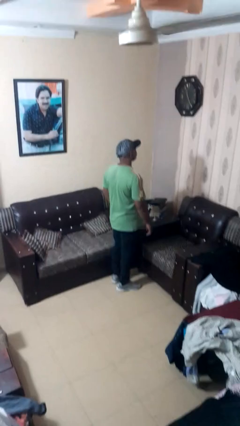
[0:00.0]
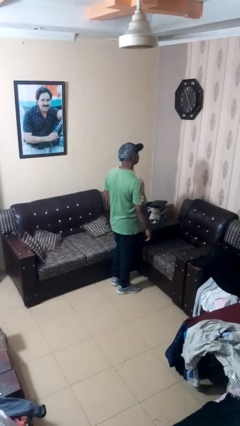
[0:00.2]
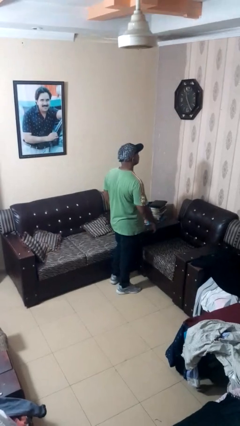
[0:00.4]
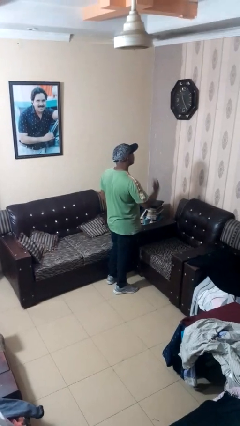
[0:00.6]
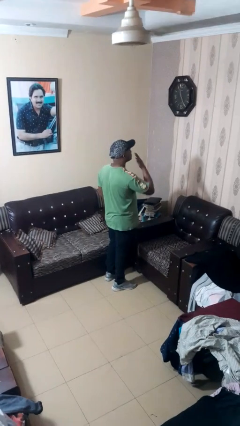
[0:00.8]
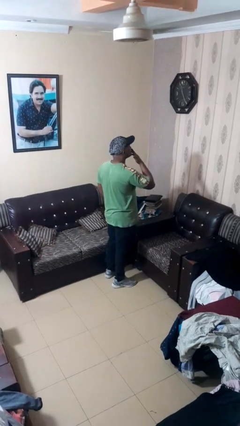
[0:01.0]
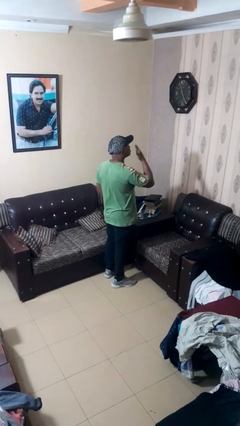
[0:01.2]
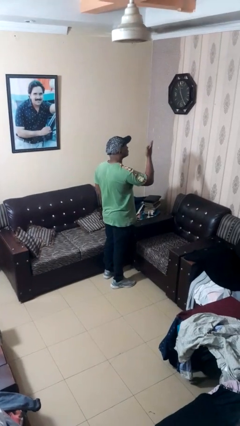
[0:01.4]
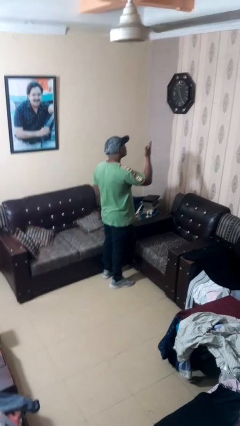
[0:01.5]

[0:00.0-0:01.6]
person gestures blow kiss

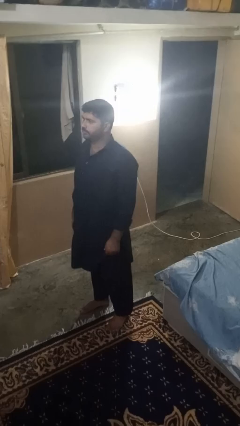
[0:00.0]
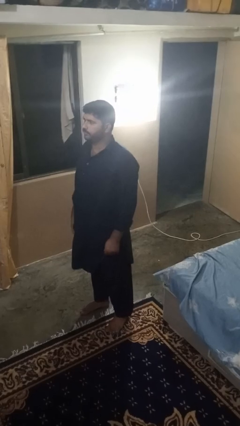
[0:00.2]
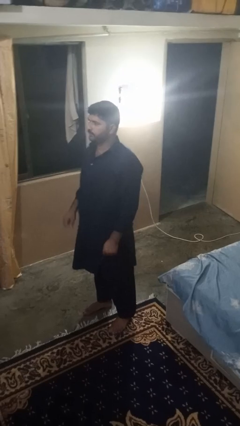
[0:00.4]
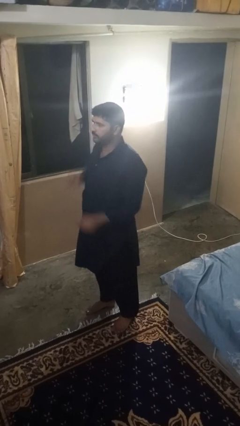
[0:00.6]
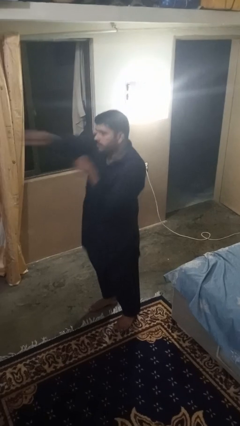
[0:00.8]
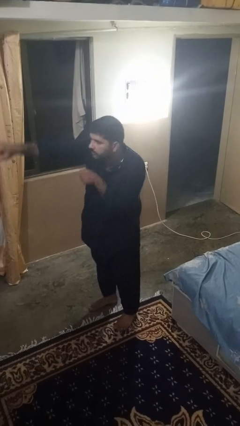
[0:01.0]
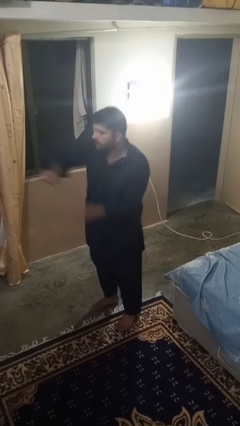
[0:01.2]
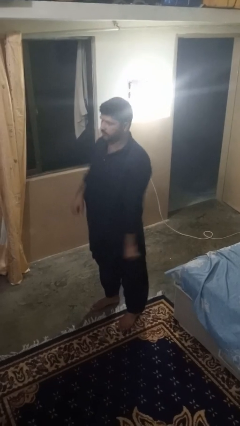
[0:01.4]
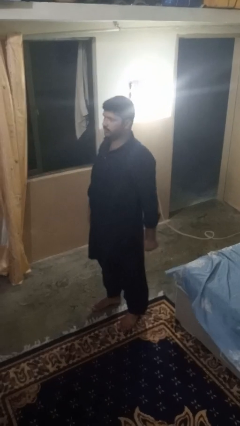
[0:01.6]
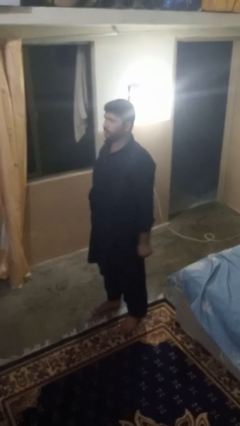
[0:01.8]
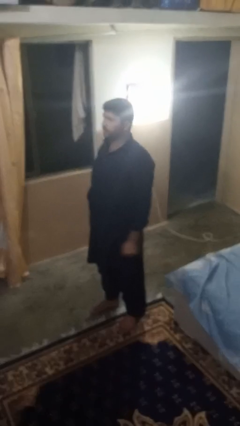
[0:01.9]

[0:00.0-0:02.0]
person karate chop

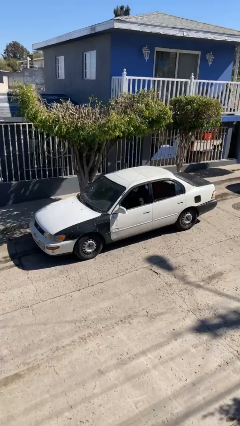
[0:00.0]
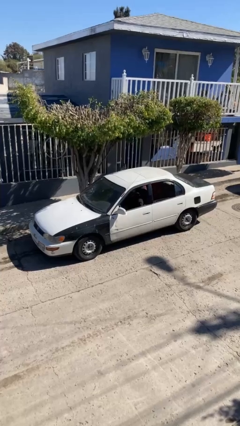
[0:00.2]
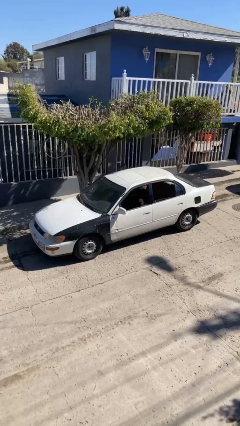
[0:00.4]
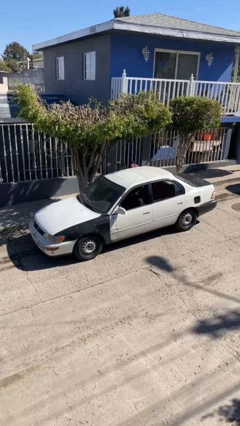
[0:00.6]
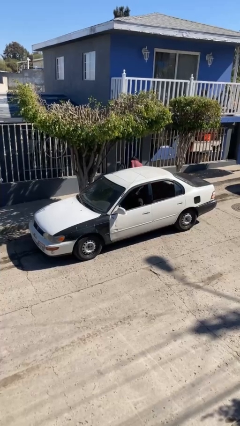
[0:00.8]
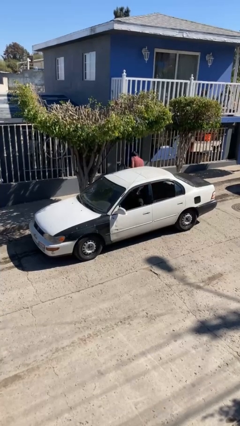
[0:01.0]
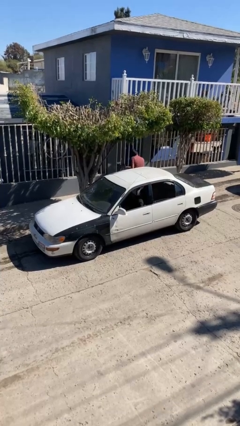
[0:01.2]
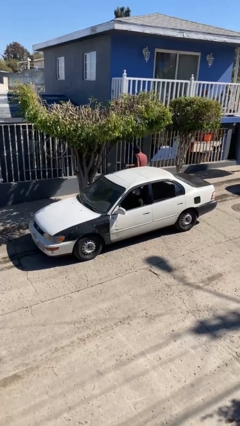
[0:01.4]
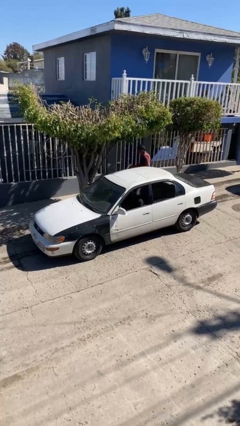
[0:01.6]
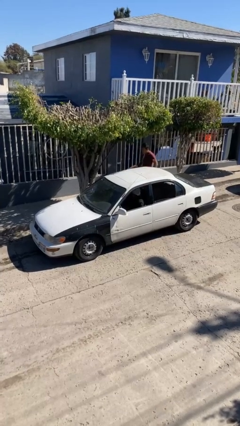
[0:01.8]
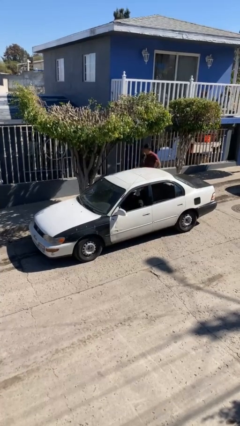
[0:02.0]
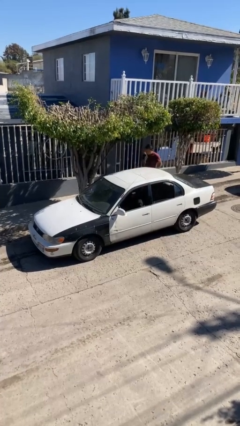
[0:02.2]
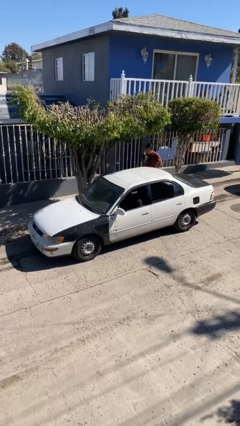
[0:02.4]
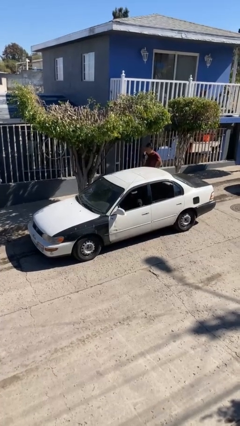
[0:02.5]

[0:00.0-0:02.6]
car drops off person

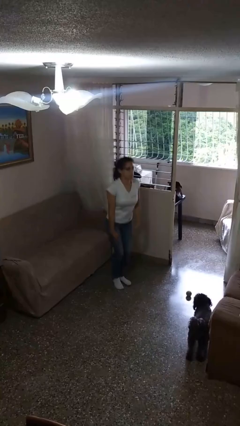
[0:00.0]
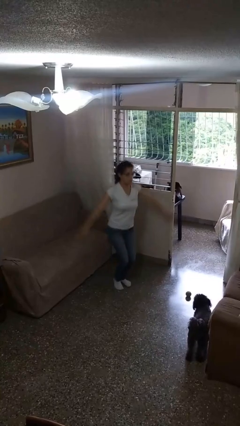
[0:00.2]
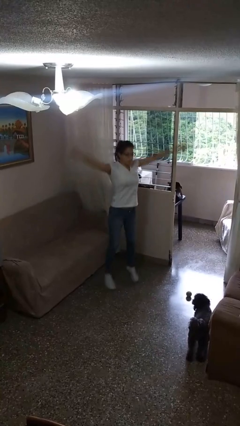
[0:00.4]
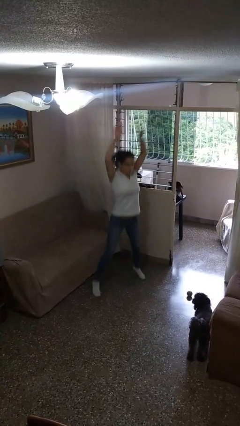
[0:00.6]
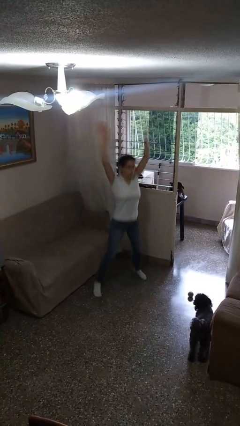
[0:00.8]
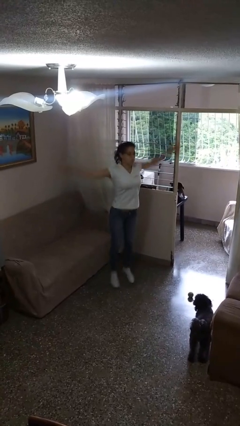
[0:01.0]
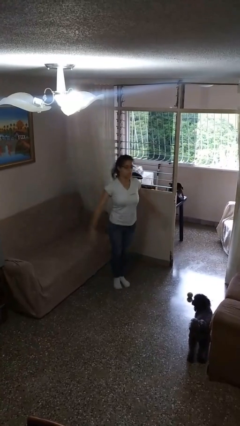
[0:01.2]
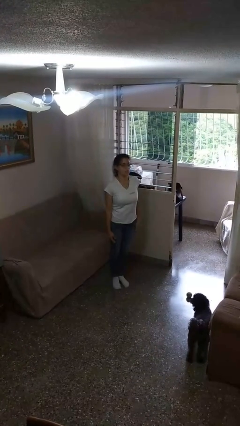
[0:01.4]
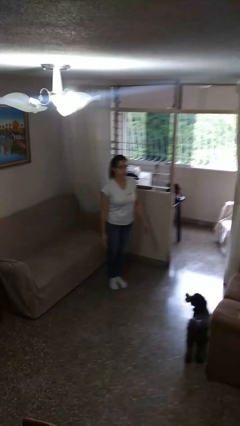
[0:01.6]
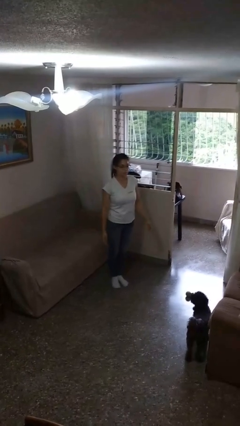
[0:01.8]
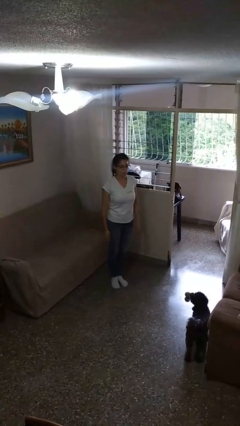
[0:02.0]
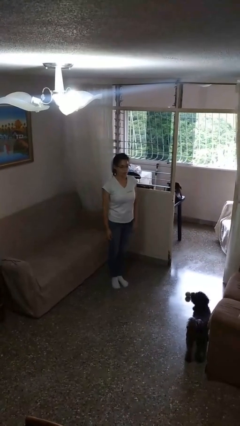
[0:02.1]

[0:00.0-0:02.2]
person exercises with jumping jacks

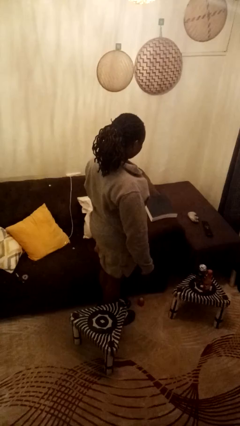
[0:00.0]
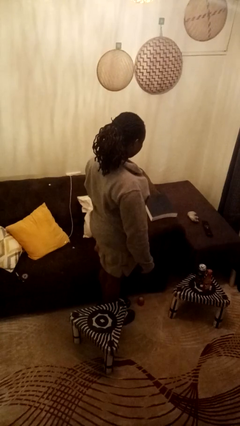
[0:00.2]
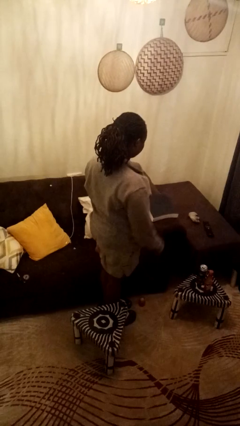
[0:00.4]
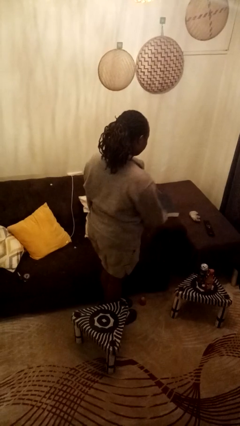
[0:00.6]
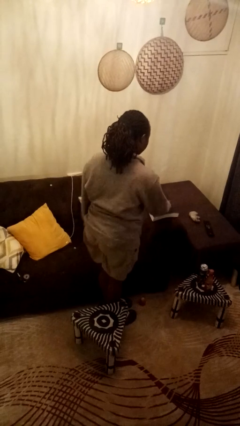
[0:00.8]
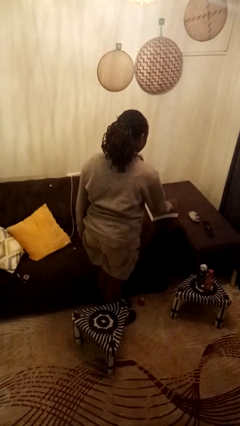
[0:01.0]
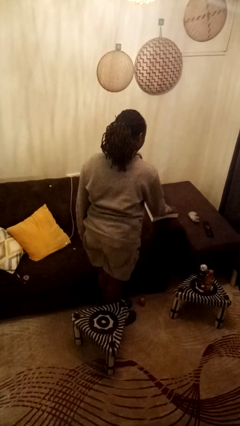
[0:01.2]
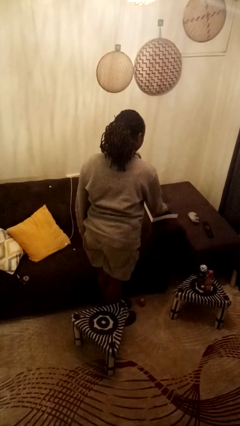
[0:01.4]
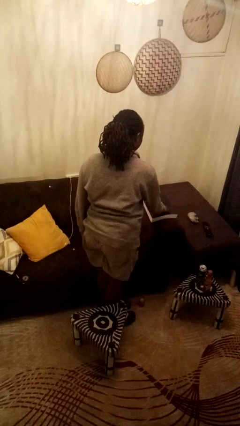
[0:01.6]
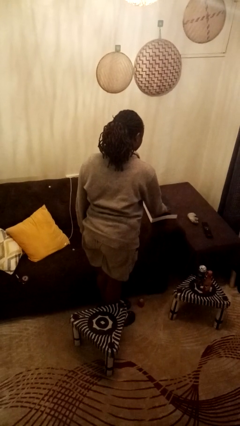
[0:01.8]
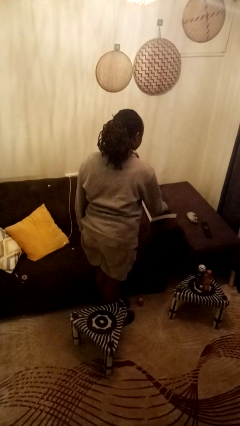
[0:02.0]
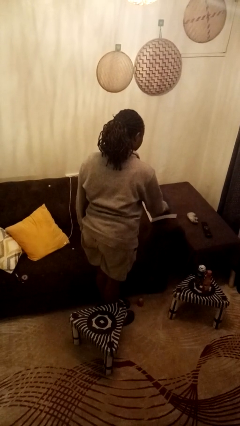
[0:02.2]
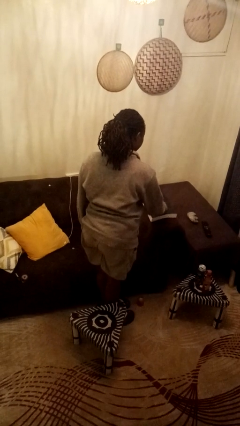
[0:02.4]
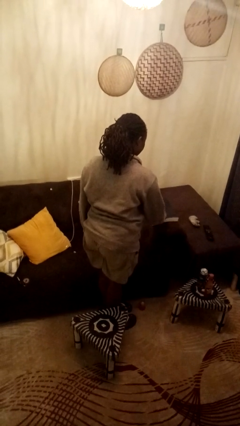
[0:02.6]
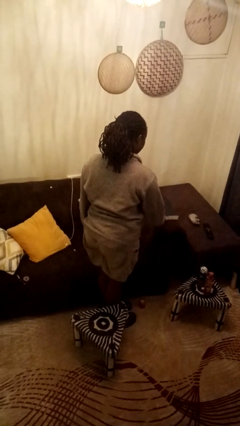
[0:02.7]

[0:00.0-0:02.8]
person taps object with finger

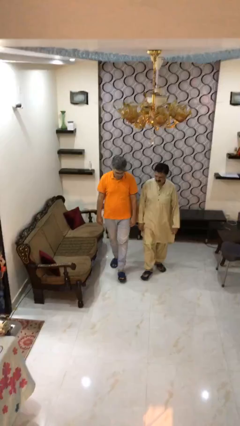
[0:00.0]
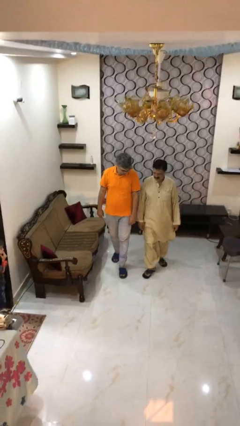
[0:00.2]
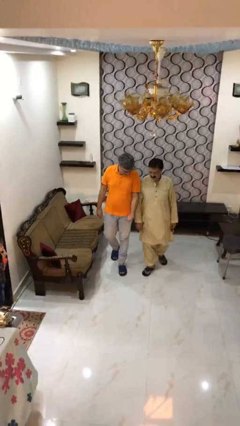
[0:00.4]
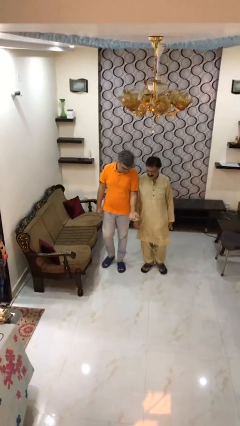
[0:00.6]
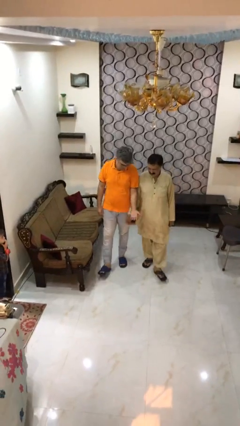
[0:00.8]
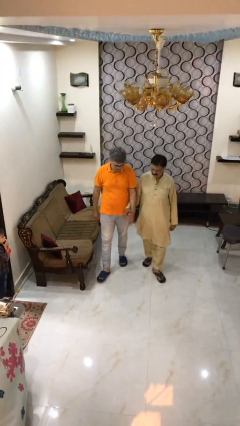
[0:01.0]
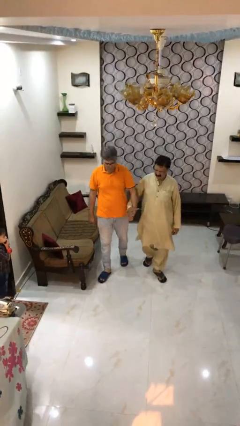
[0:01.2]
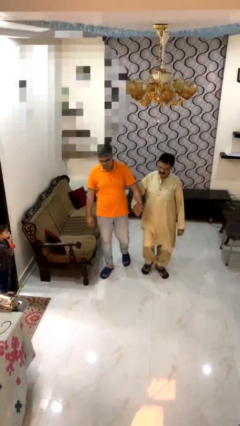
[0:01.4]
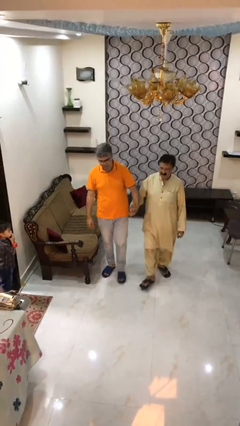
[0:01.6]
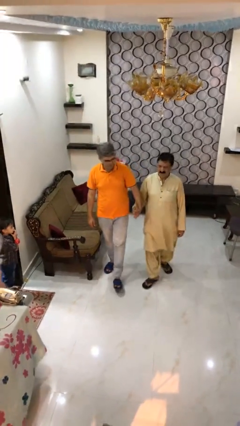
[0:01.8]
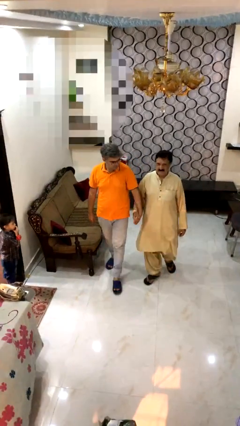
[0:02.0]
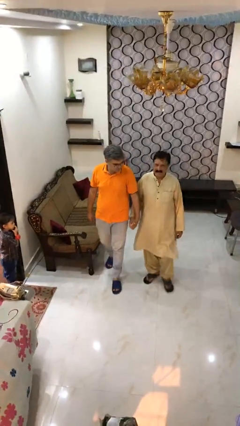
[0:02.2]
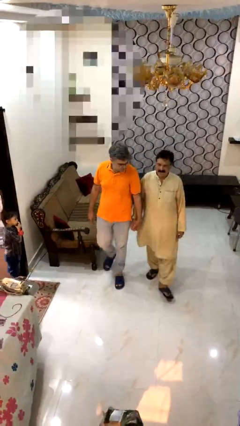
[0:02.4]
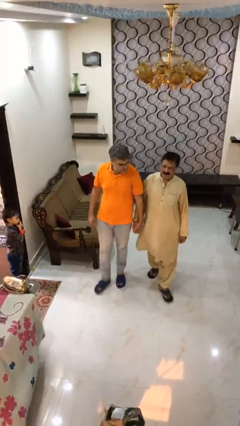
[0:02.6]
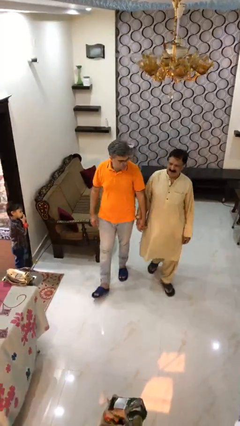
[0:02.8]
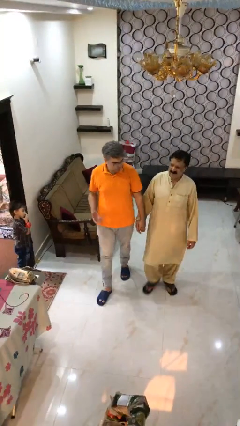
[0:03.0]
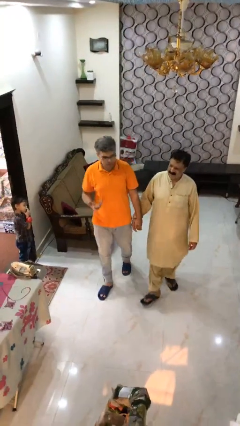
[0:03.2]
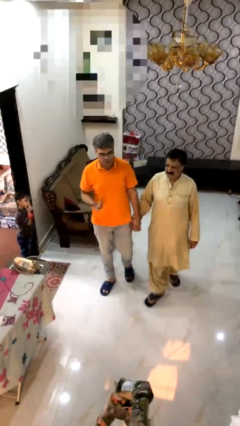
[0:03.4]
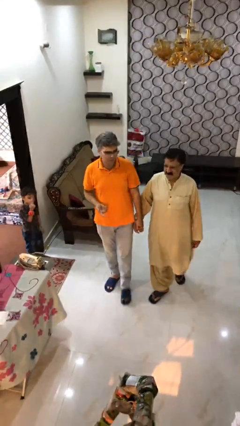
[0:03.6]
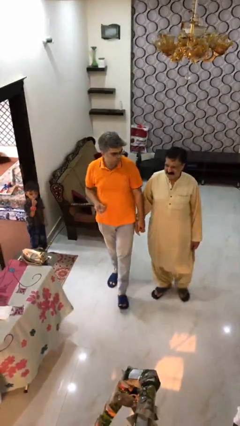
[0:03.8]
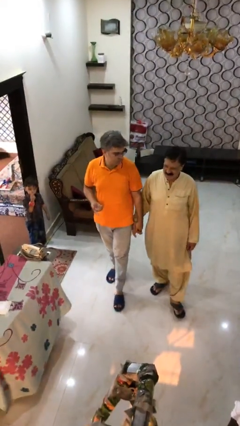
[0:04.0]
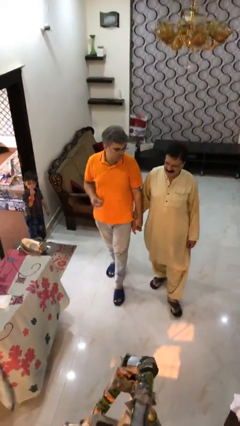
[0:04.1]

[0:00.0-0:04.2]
person holds hand

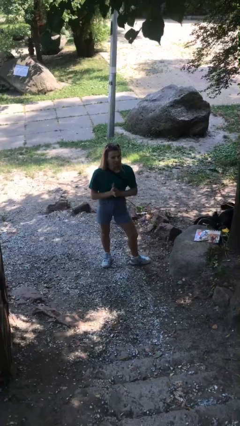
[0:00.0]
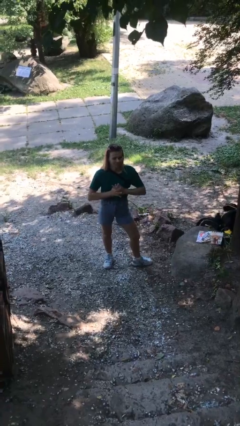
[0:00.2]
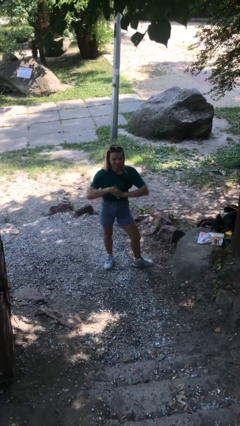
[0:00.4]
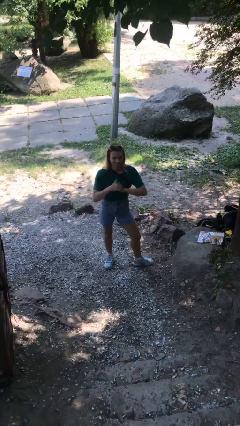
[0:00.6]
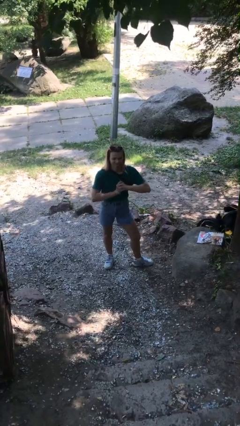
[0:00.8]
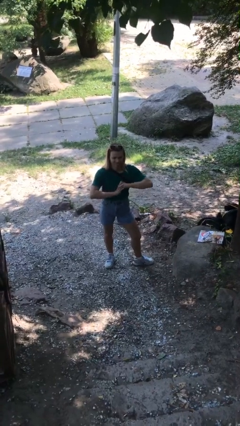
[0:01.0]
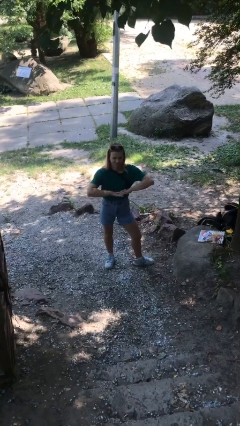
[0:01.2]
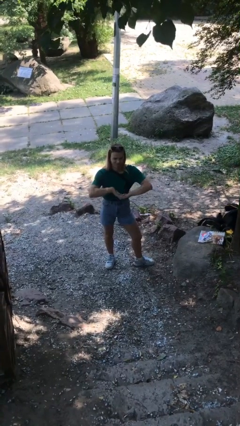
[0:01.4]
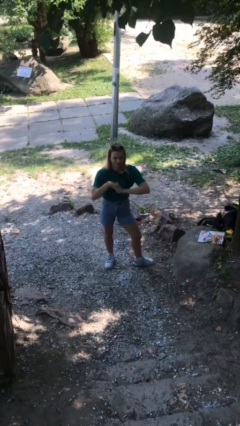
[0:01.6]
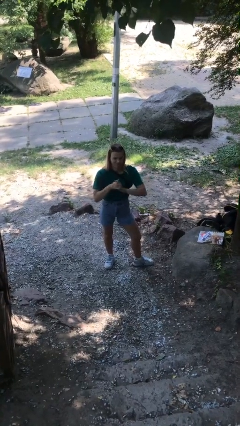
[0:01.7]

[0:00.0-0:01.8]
person cracks knuckles
